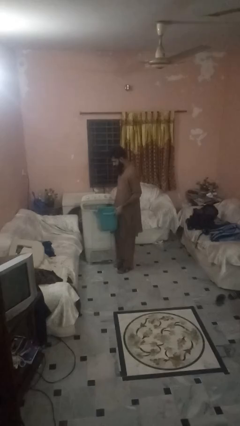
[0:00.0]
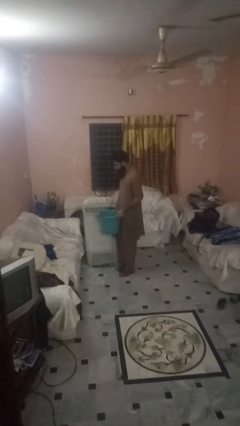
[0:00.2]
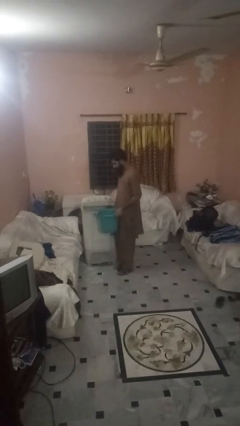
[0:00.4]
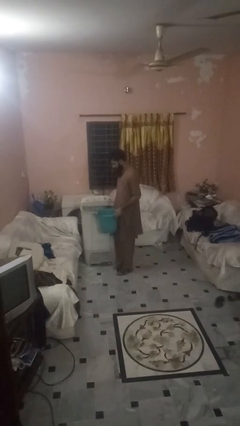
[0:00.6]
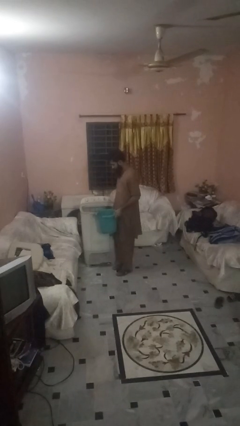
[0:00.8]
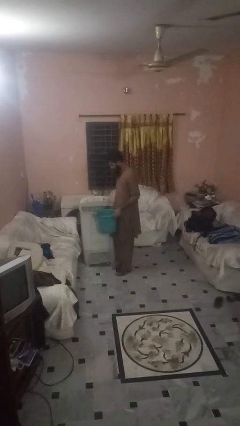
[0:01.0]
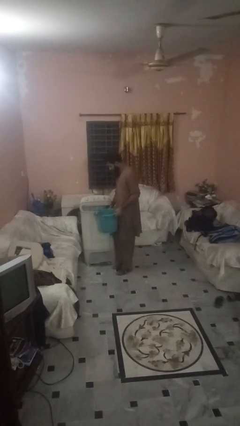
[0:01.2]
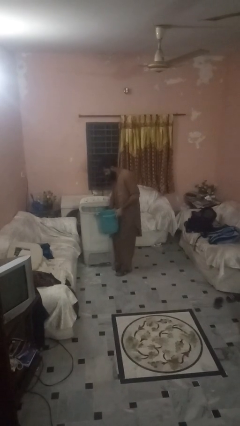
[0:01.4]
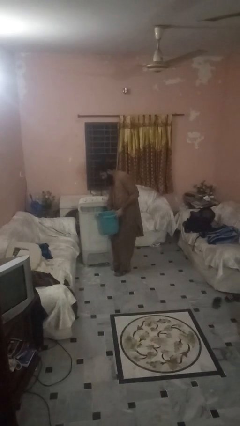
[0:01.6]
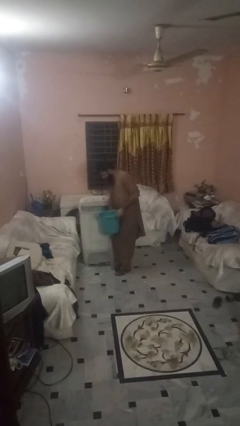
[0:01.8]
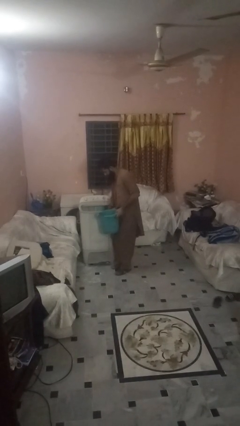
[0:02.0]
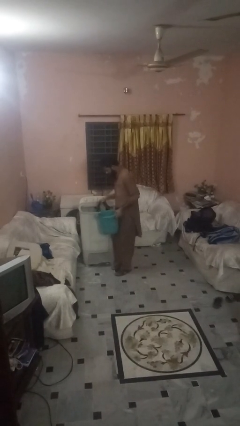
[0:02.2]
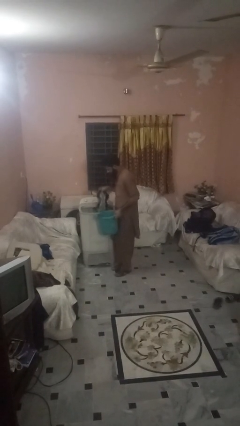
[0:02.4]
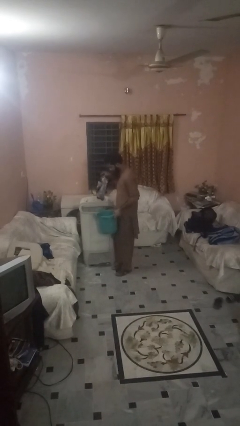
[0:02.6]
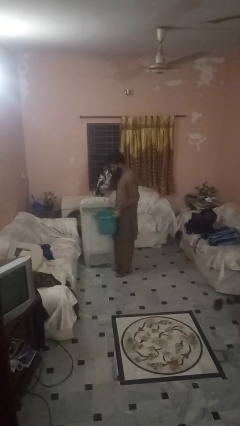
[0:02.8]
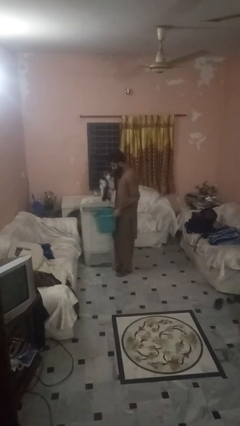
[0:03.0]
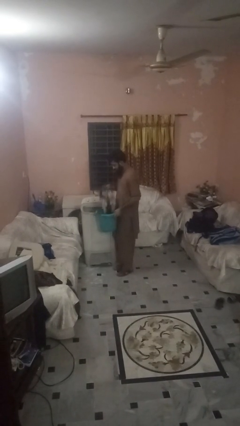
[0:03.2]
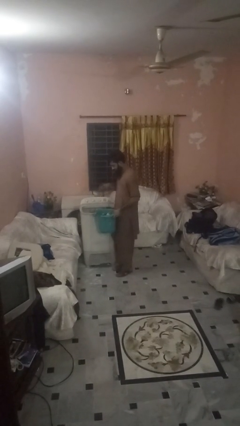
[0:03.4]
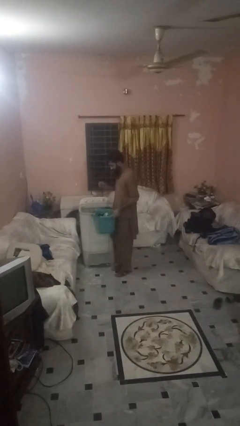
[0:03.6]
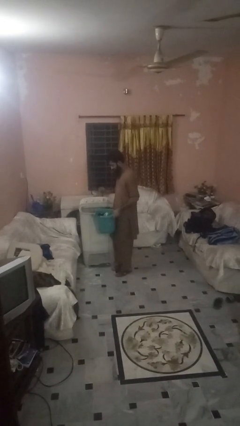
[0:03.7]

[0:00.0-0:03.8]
person unloads clotheswasher

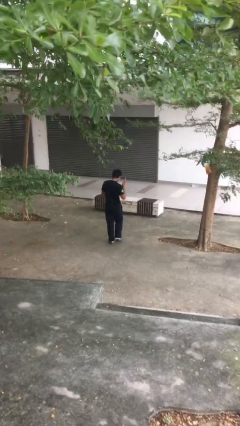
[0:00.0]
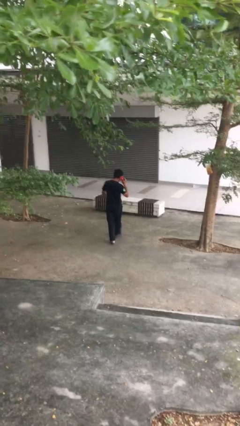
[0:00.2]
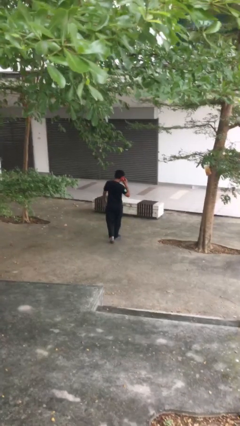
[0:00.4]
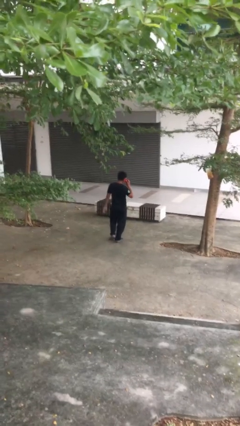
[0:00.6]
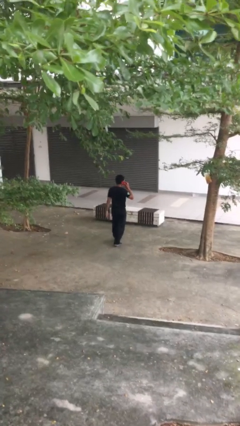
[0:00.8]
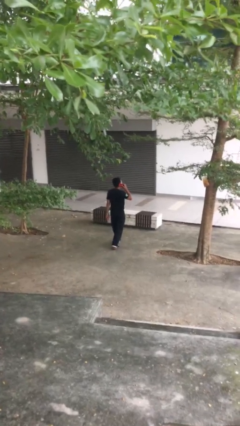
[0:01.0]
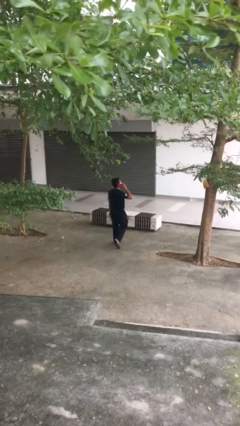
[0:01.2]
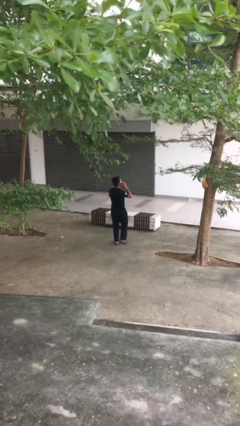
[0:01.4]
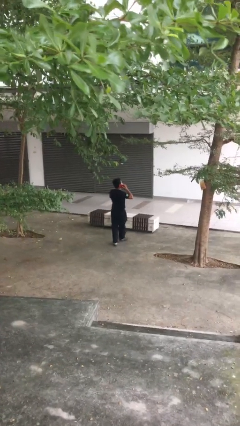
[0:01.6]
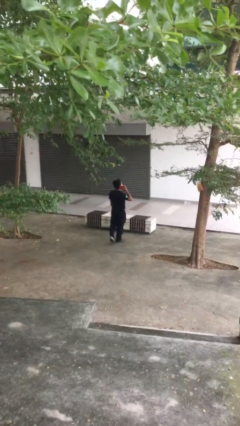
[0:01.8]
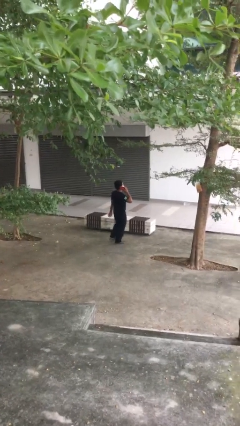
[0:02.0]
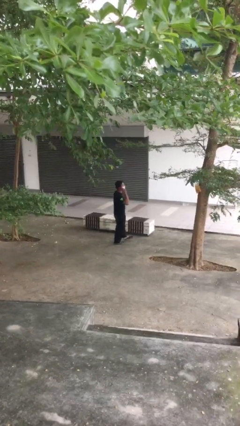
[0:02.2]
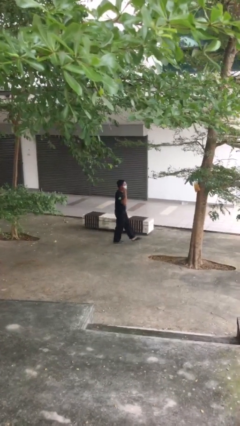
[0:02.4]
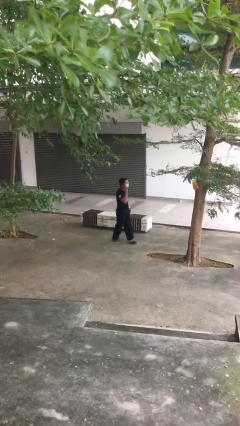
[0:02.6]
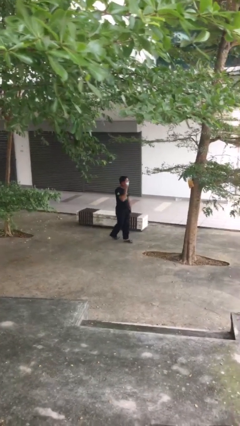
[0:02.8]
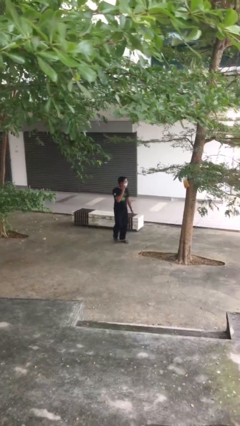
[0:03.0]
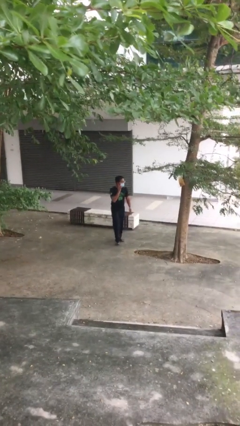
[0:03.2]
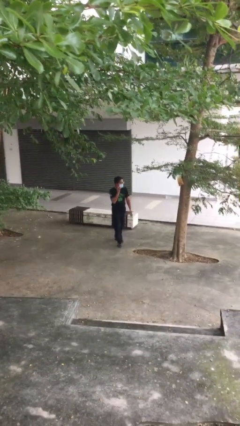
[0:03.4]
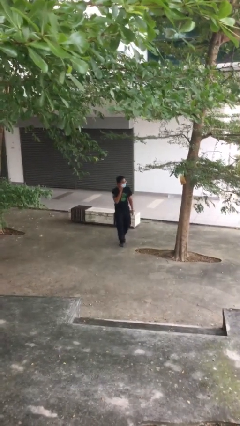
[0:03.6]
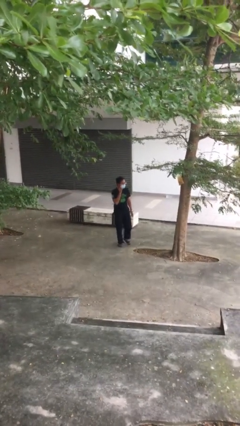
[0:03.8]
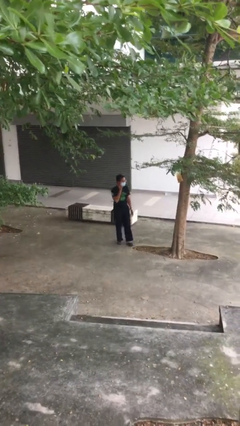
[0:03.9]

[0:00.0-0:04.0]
person talks on phone

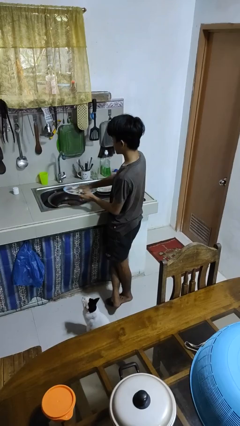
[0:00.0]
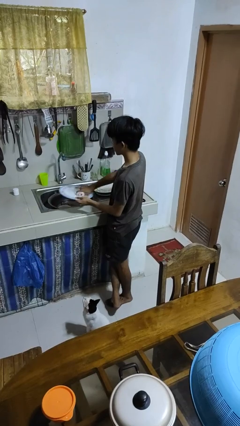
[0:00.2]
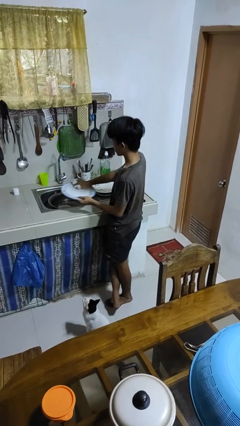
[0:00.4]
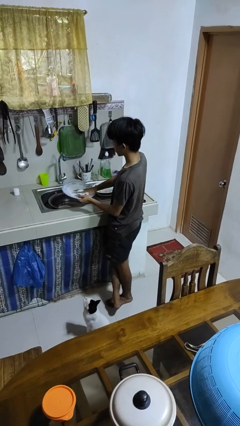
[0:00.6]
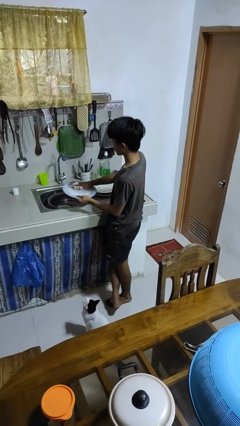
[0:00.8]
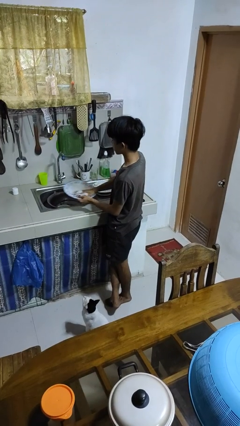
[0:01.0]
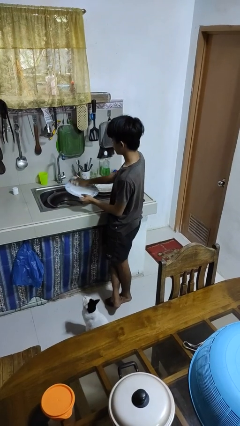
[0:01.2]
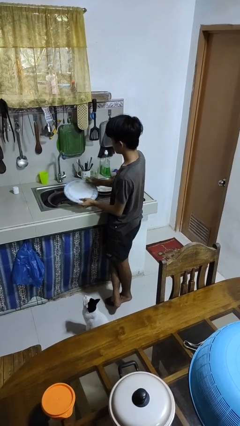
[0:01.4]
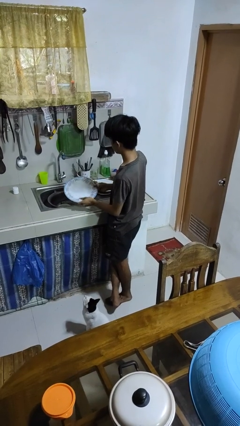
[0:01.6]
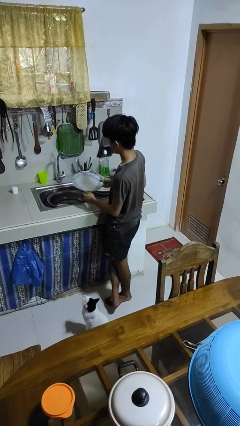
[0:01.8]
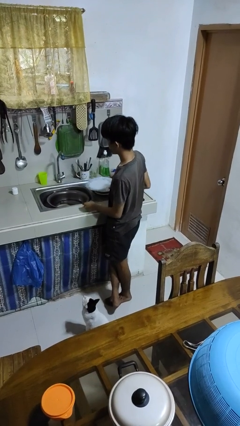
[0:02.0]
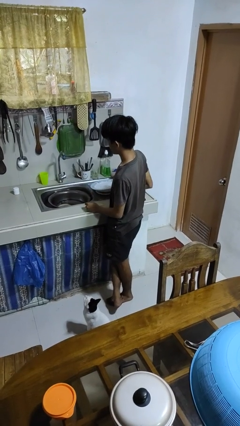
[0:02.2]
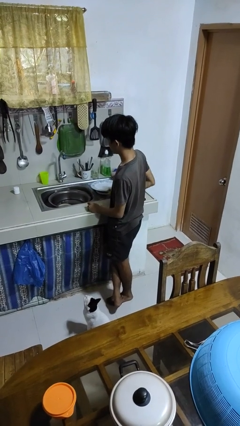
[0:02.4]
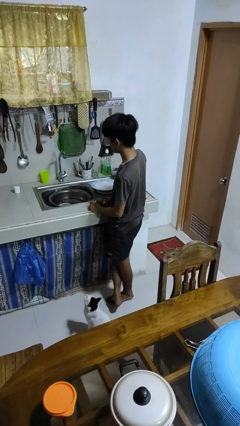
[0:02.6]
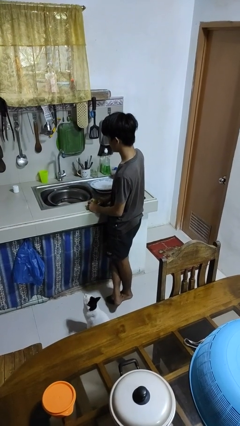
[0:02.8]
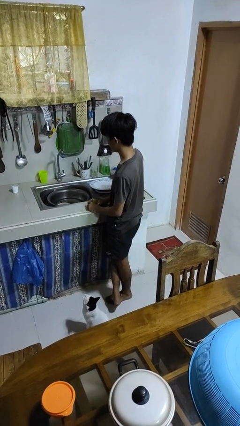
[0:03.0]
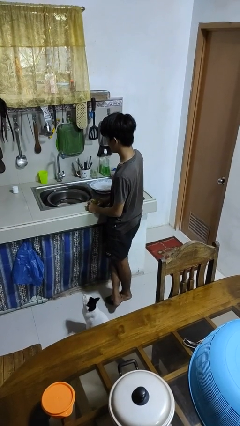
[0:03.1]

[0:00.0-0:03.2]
person dries hands with towel

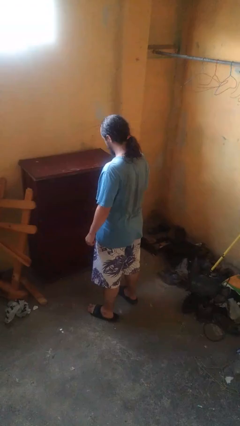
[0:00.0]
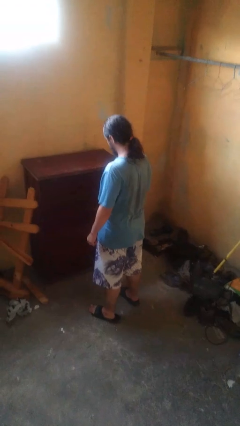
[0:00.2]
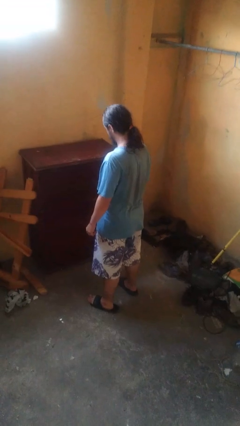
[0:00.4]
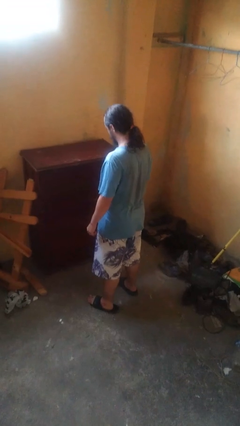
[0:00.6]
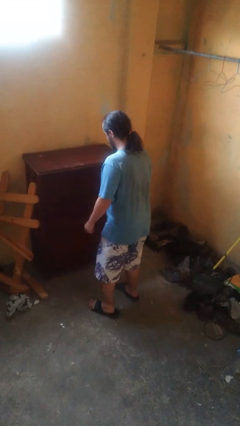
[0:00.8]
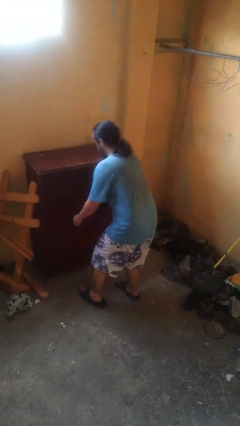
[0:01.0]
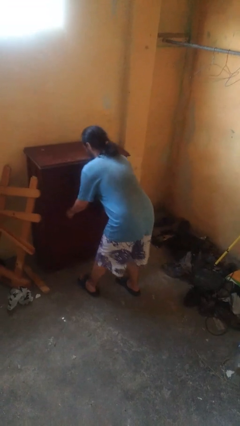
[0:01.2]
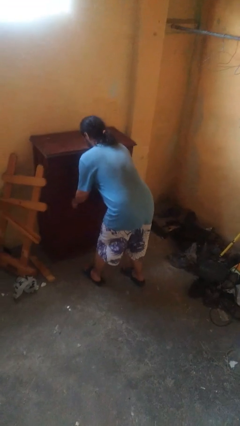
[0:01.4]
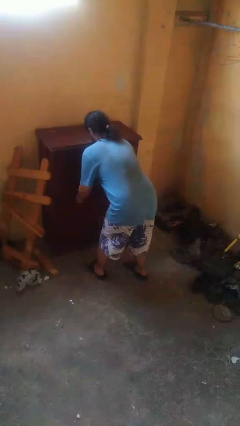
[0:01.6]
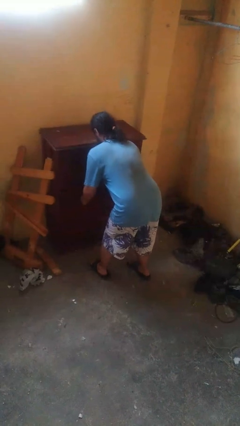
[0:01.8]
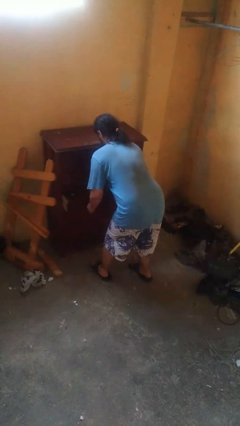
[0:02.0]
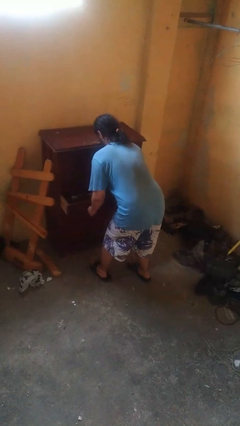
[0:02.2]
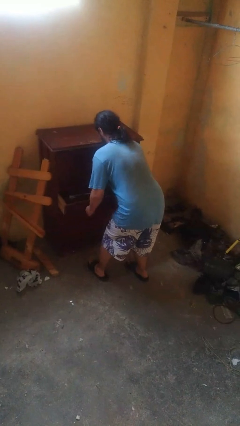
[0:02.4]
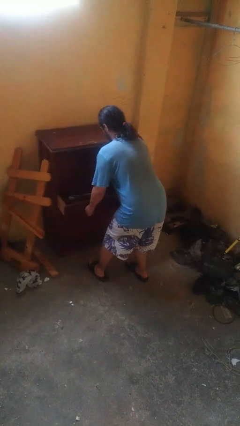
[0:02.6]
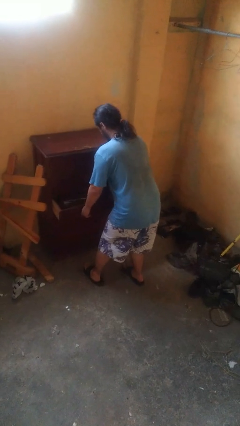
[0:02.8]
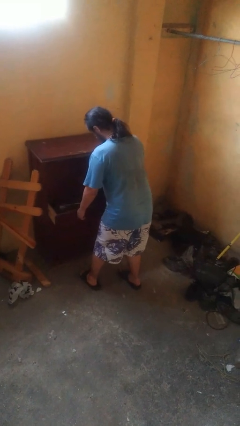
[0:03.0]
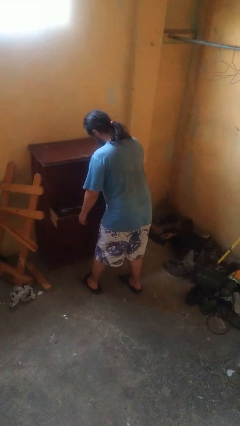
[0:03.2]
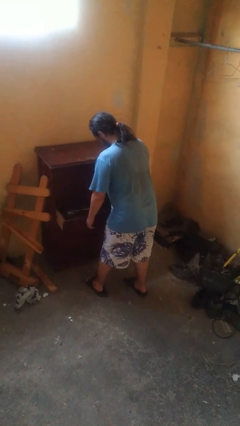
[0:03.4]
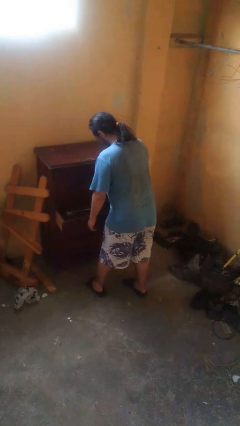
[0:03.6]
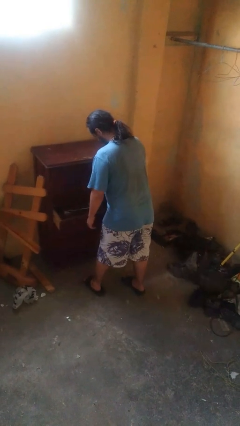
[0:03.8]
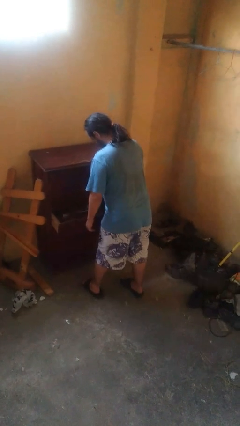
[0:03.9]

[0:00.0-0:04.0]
person opens dresser drawer

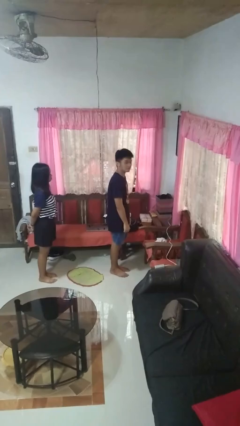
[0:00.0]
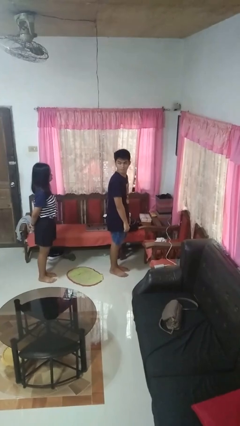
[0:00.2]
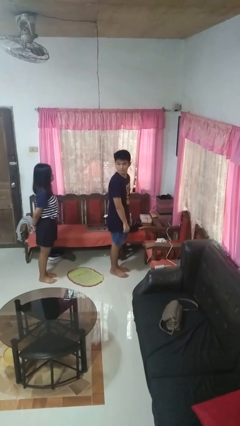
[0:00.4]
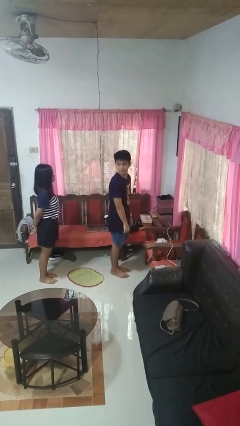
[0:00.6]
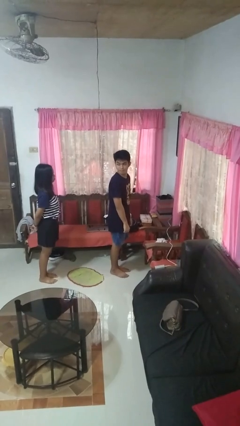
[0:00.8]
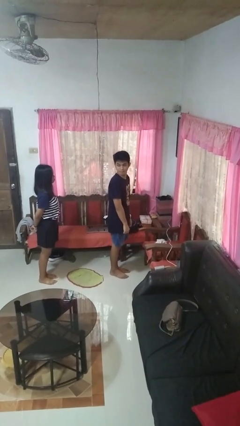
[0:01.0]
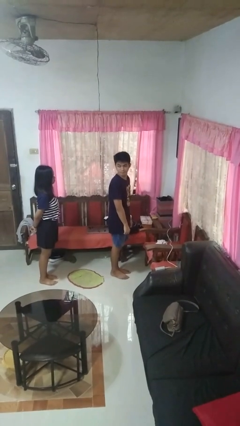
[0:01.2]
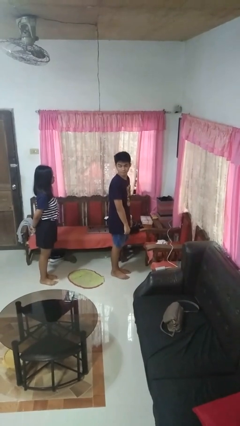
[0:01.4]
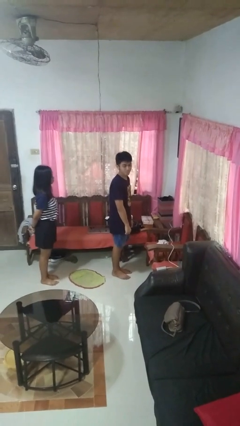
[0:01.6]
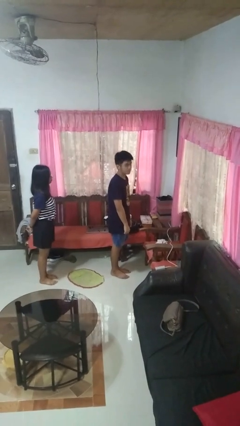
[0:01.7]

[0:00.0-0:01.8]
person looks over shoulder

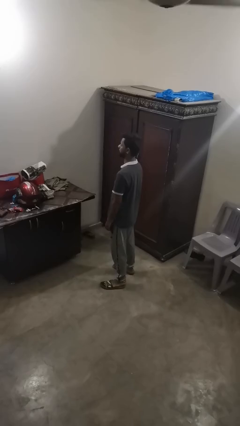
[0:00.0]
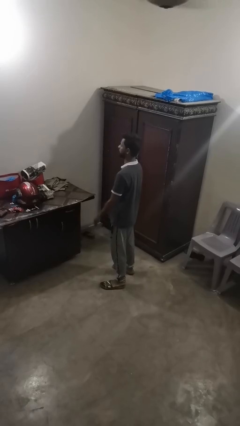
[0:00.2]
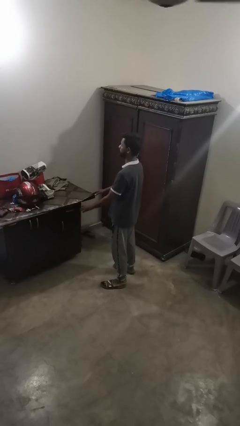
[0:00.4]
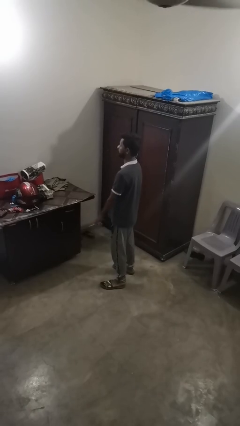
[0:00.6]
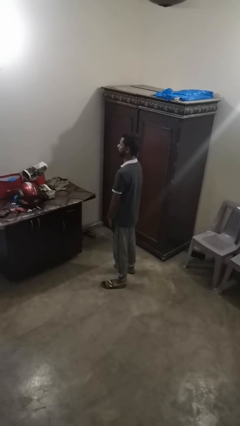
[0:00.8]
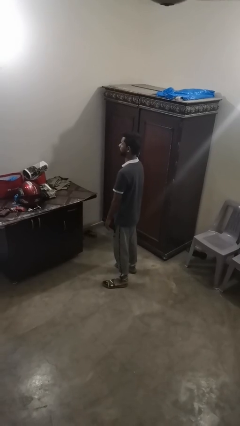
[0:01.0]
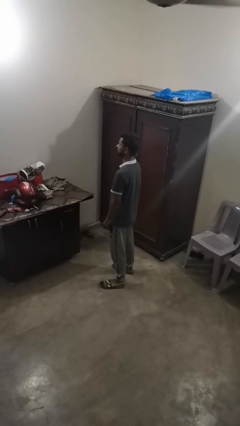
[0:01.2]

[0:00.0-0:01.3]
person slaps hands on thighs
